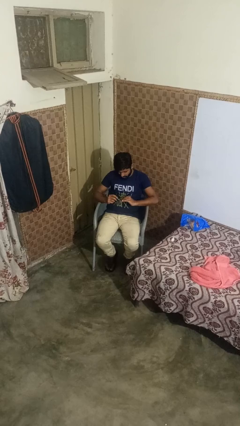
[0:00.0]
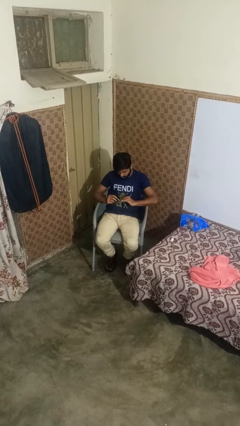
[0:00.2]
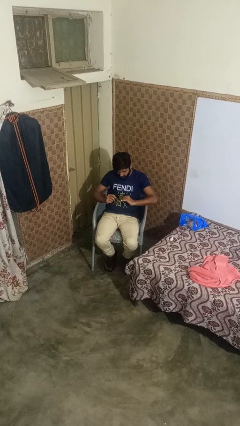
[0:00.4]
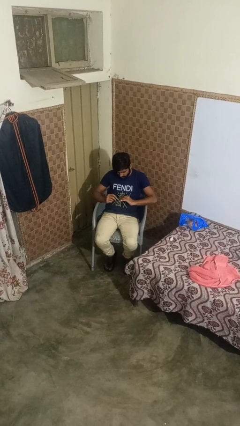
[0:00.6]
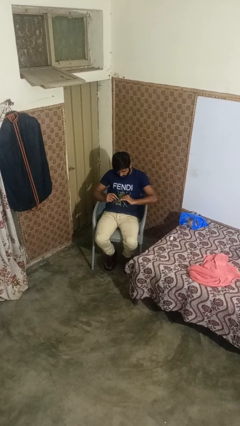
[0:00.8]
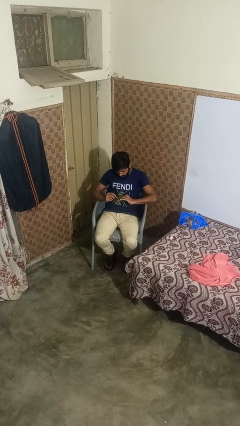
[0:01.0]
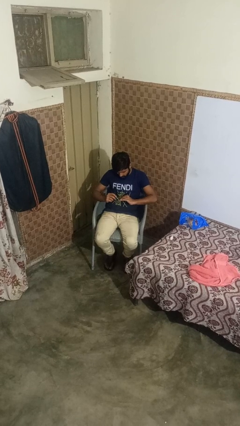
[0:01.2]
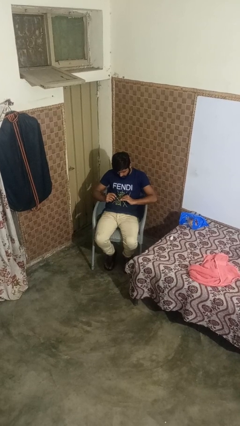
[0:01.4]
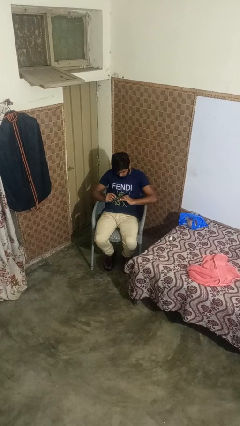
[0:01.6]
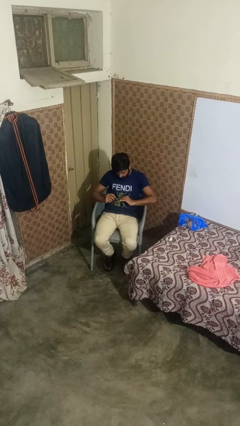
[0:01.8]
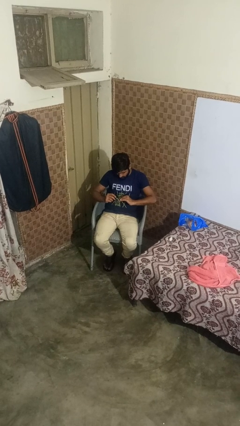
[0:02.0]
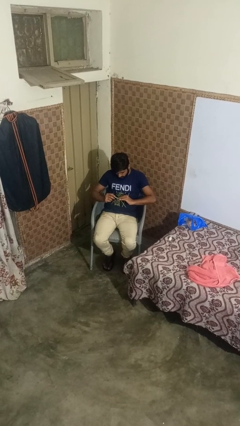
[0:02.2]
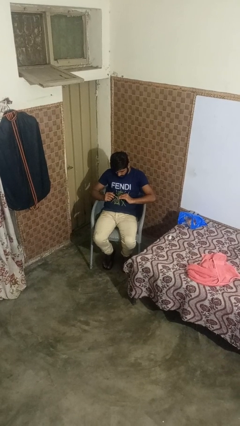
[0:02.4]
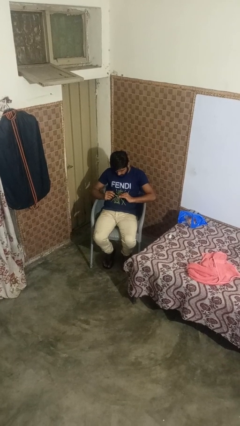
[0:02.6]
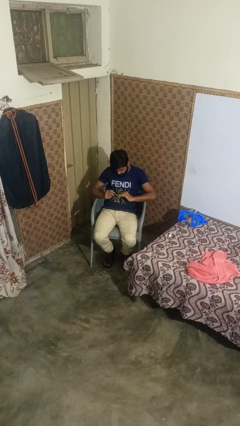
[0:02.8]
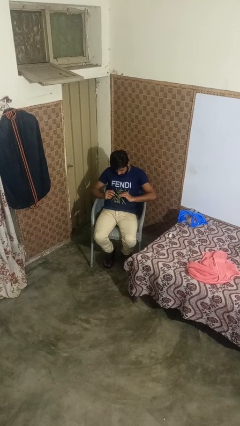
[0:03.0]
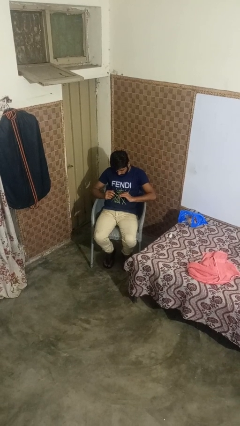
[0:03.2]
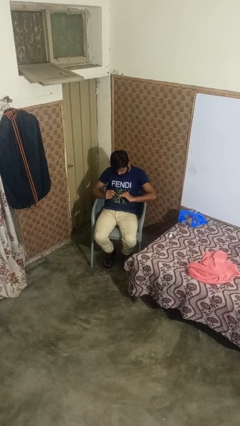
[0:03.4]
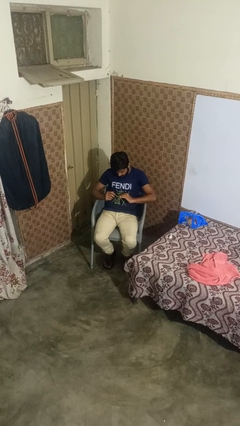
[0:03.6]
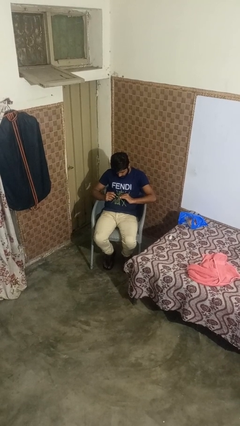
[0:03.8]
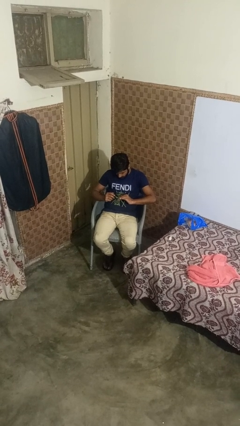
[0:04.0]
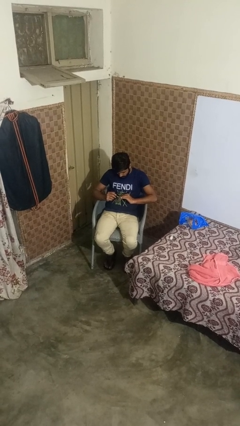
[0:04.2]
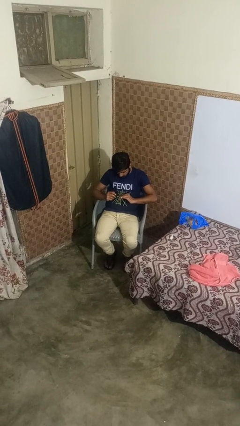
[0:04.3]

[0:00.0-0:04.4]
person paints fingernails

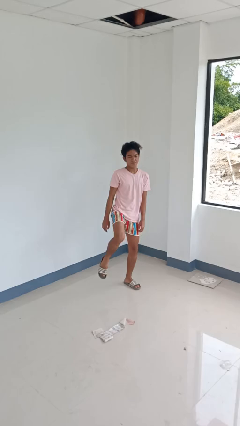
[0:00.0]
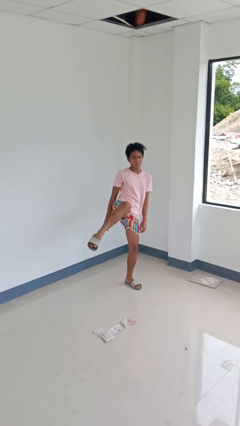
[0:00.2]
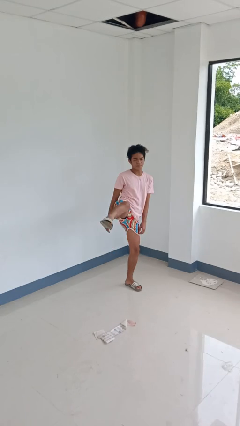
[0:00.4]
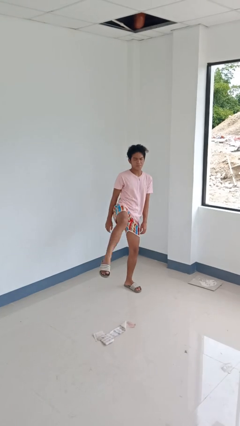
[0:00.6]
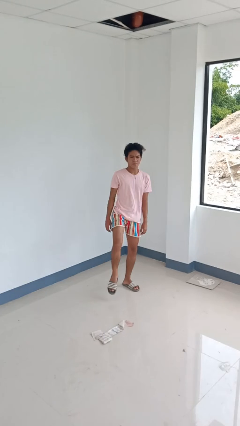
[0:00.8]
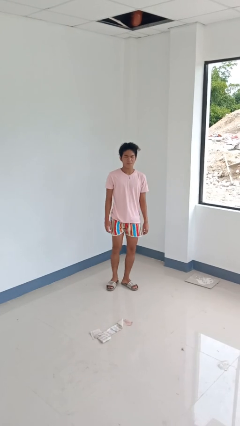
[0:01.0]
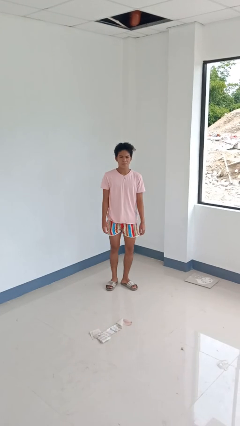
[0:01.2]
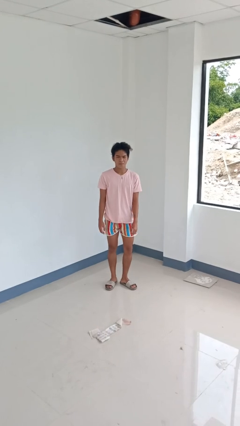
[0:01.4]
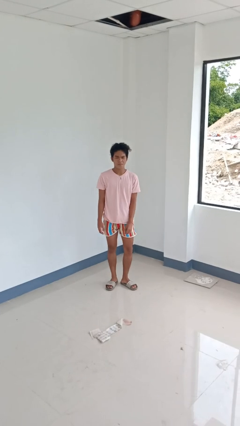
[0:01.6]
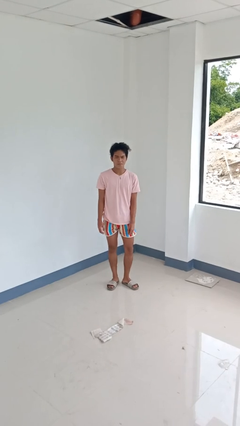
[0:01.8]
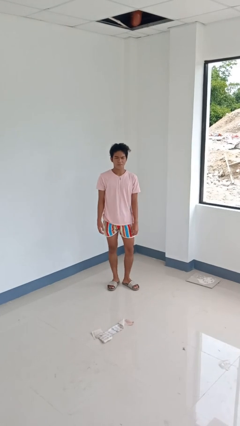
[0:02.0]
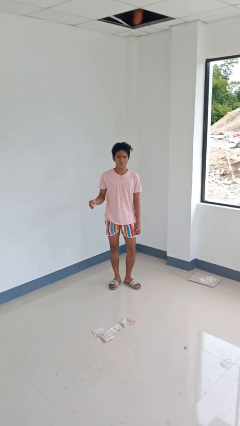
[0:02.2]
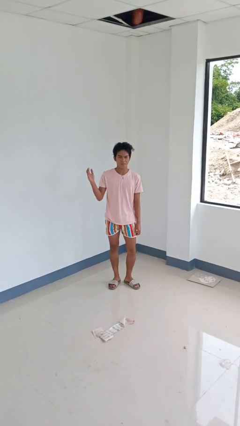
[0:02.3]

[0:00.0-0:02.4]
person karate kicks

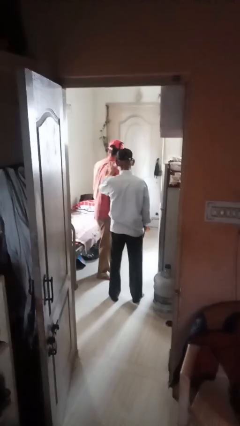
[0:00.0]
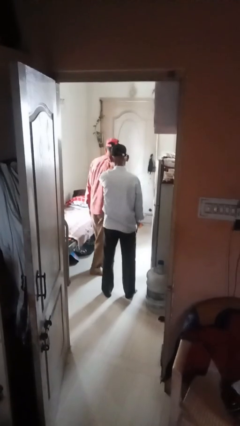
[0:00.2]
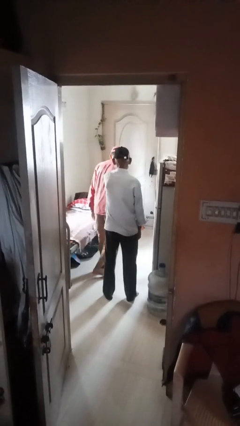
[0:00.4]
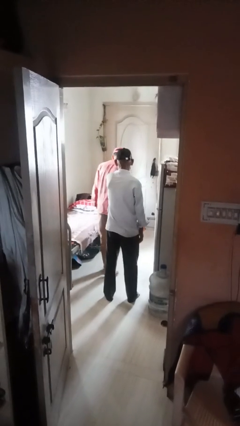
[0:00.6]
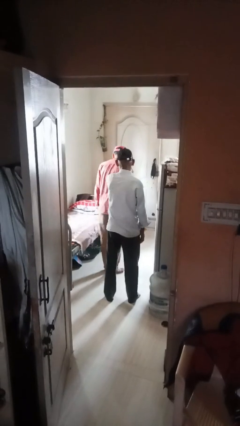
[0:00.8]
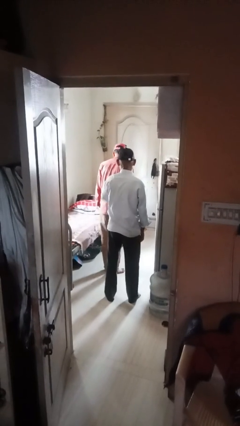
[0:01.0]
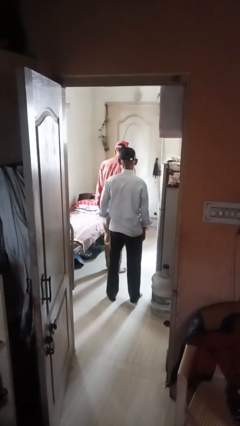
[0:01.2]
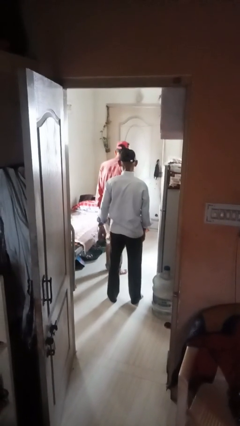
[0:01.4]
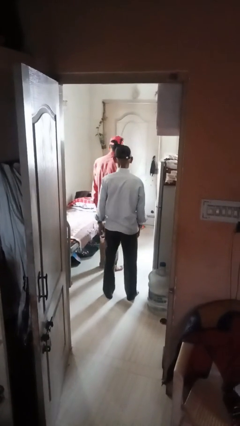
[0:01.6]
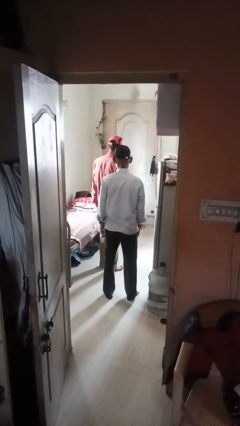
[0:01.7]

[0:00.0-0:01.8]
person shoves person

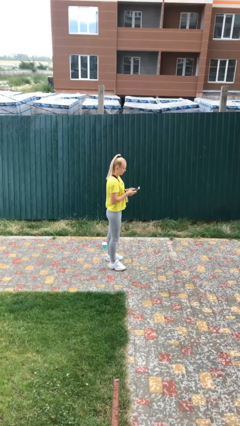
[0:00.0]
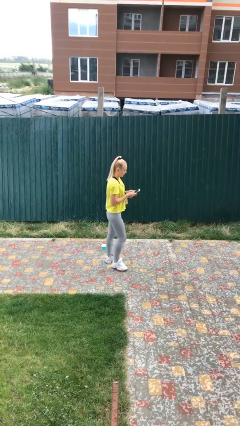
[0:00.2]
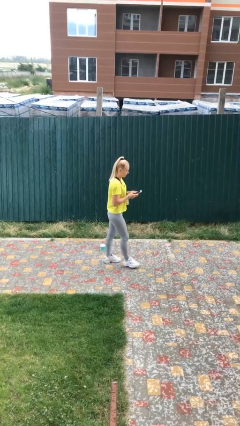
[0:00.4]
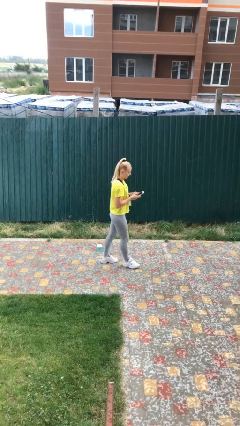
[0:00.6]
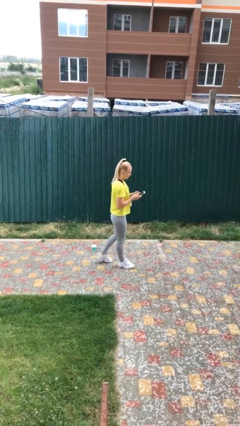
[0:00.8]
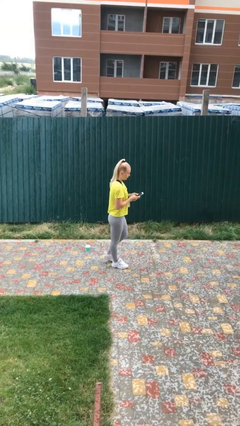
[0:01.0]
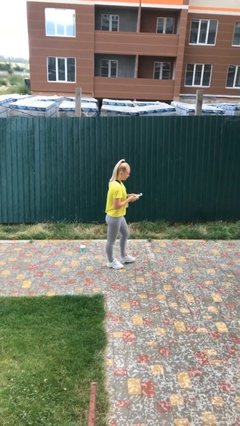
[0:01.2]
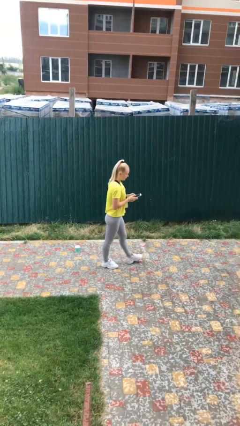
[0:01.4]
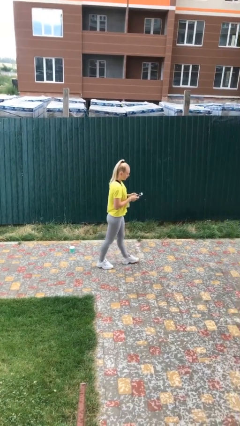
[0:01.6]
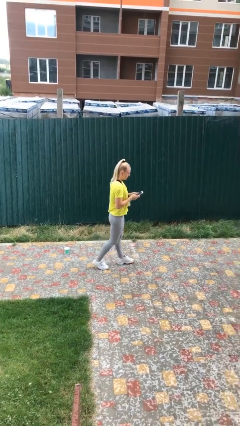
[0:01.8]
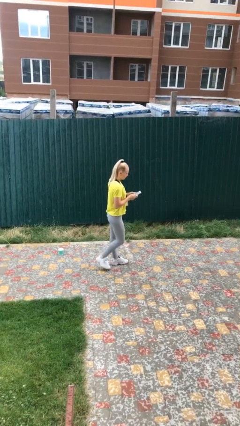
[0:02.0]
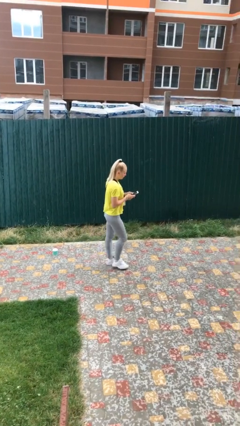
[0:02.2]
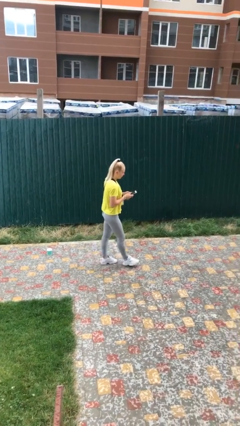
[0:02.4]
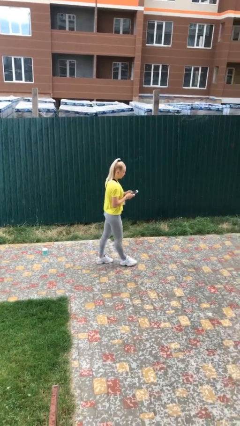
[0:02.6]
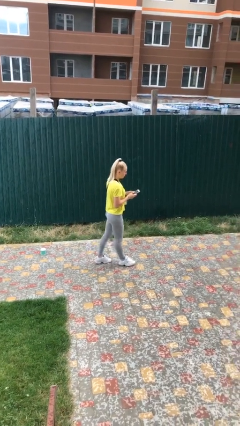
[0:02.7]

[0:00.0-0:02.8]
person texts on phone

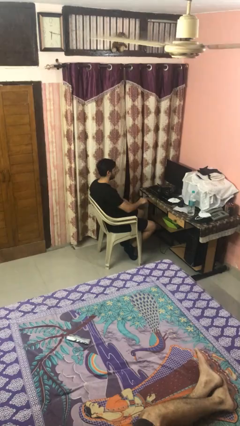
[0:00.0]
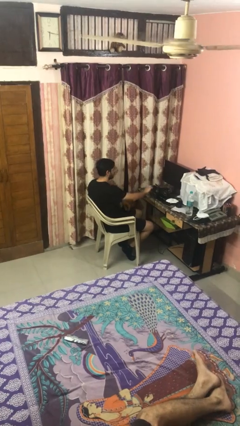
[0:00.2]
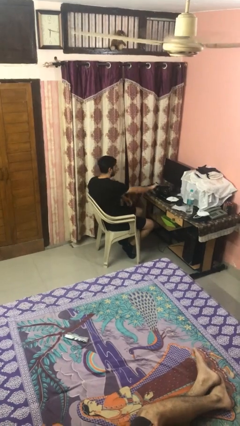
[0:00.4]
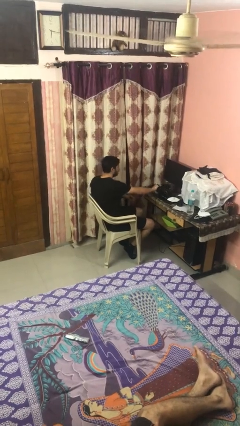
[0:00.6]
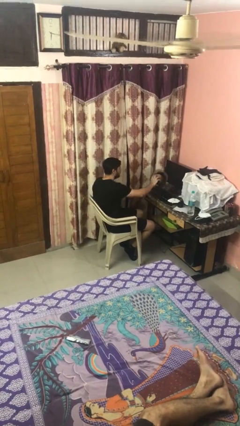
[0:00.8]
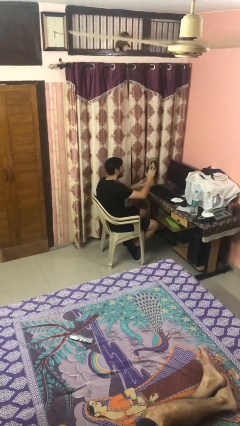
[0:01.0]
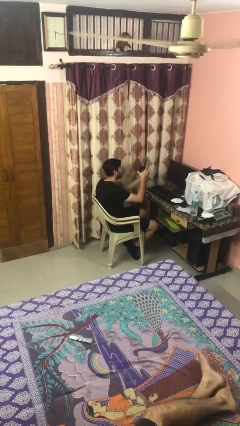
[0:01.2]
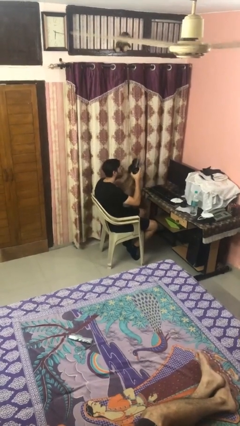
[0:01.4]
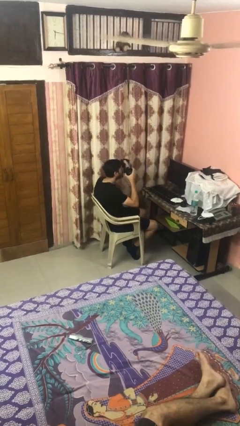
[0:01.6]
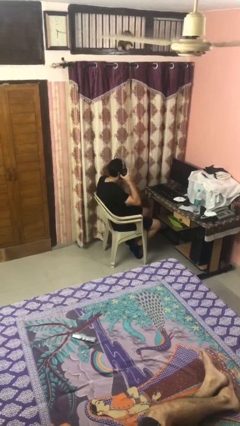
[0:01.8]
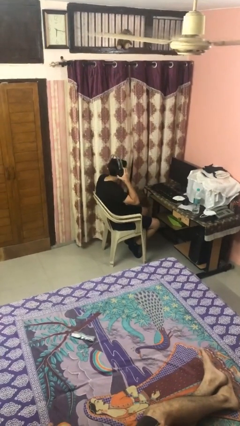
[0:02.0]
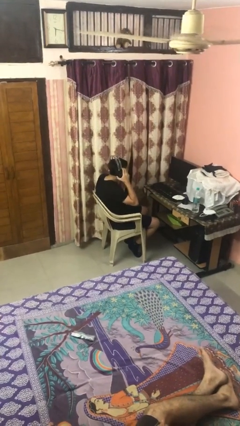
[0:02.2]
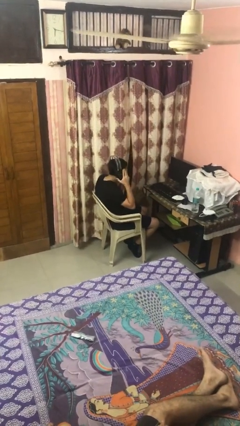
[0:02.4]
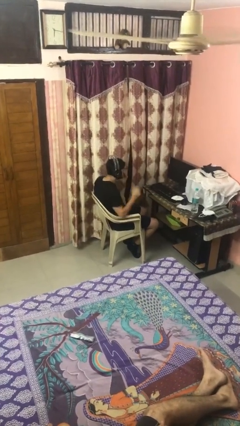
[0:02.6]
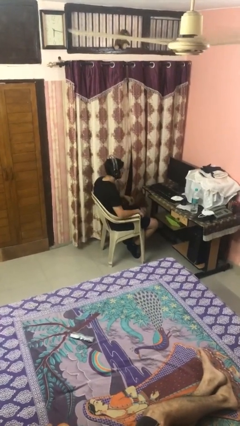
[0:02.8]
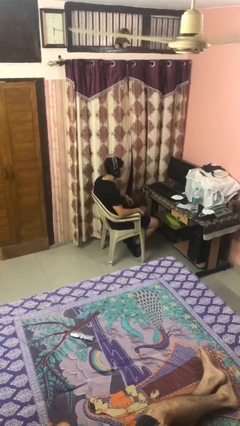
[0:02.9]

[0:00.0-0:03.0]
person puts on headphones

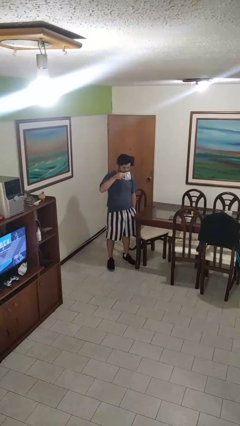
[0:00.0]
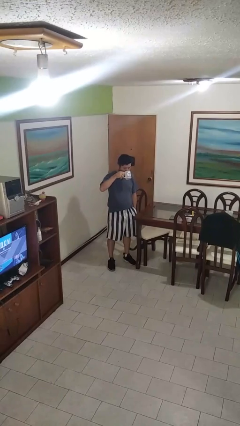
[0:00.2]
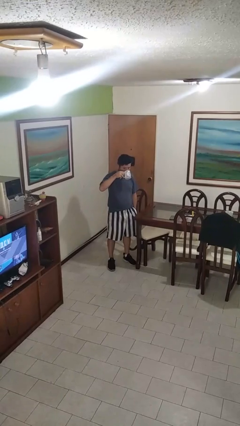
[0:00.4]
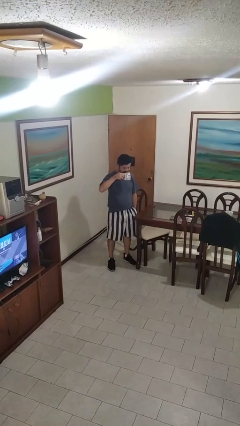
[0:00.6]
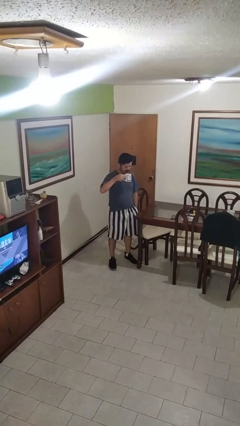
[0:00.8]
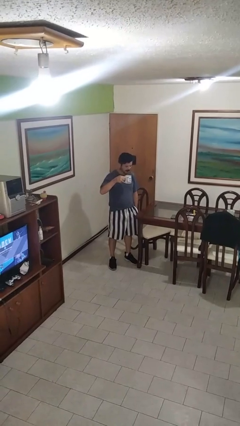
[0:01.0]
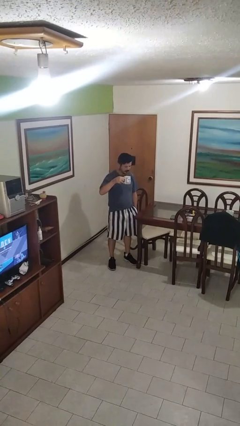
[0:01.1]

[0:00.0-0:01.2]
person drinks from mug

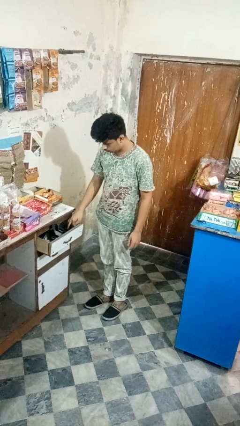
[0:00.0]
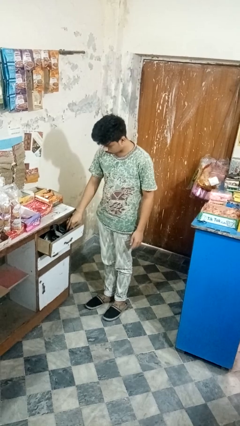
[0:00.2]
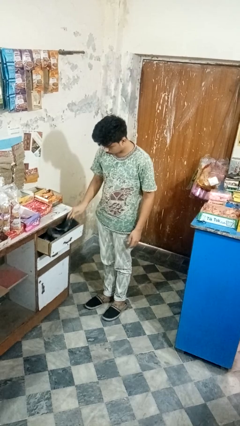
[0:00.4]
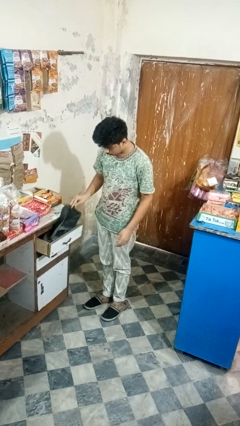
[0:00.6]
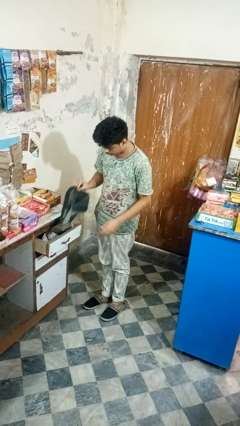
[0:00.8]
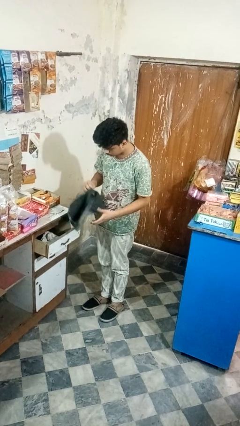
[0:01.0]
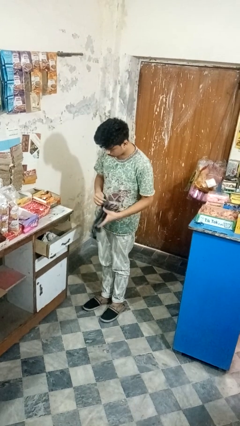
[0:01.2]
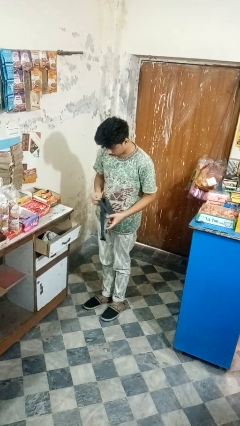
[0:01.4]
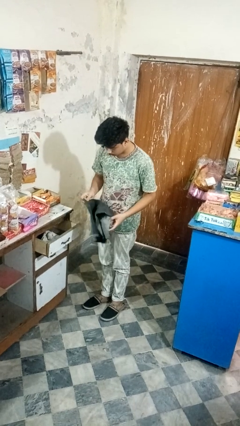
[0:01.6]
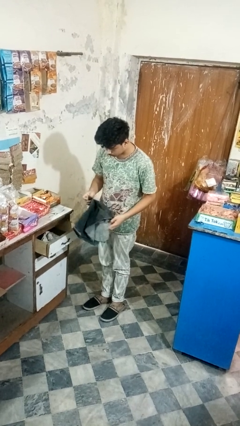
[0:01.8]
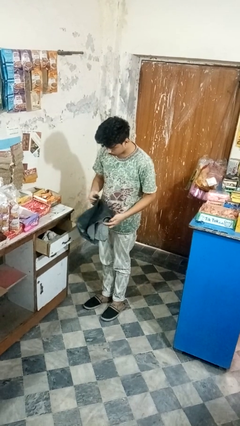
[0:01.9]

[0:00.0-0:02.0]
person takes clothes from dresser
